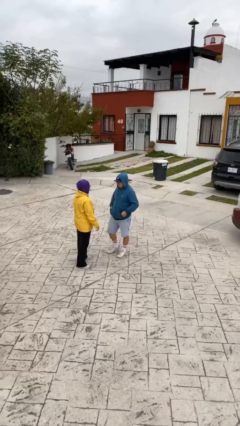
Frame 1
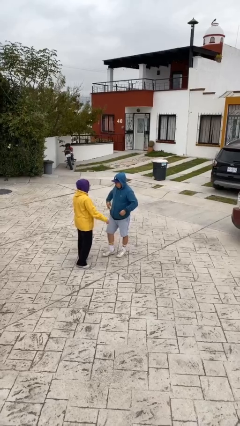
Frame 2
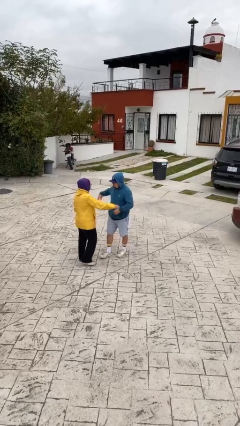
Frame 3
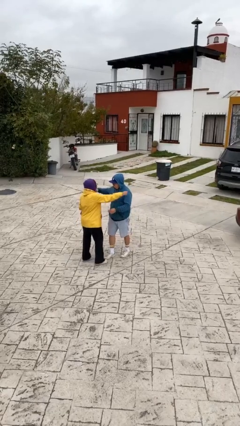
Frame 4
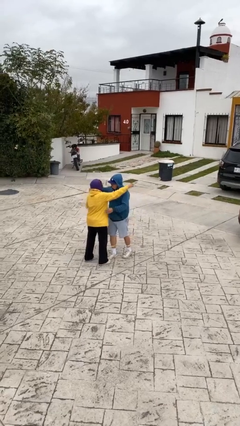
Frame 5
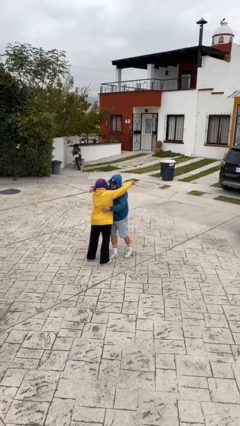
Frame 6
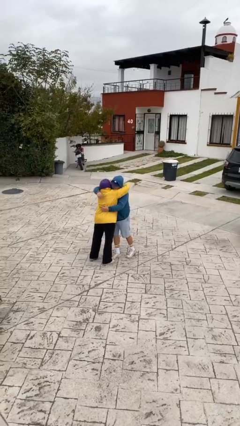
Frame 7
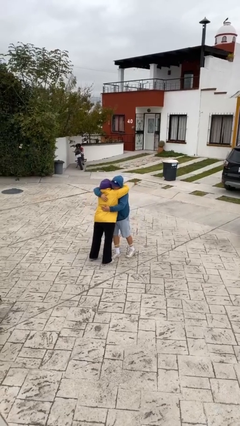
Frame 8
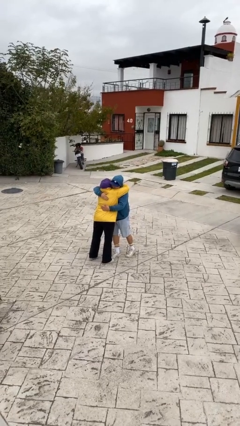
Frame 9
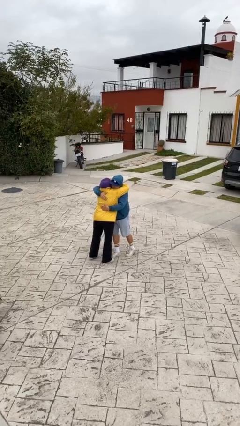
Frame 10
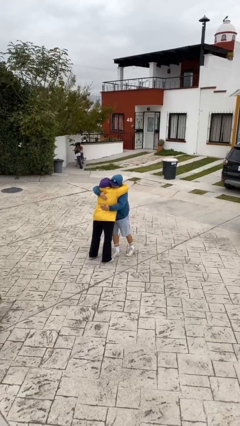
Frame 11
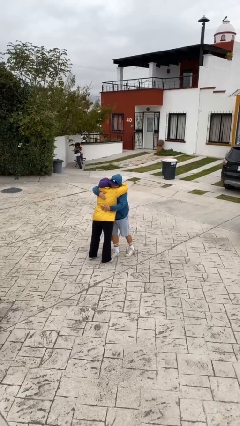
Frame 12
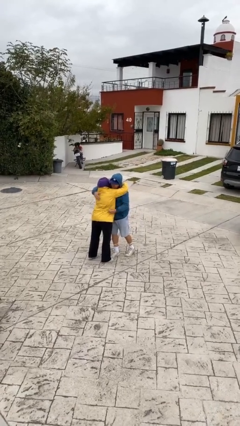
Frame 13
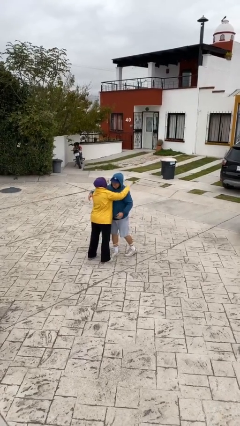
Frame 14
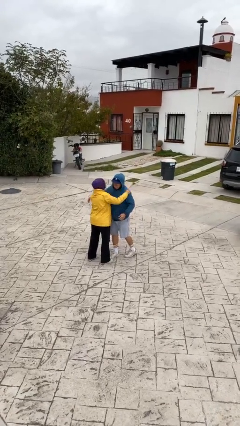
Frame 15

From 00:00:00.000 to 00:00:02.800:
person embraces person

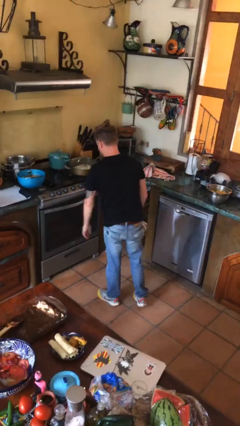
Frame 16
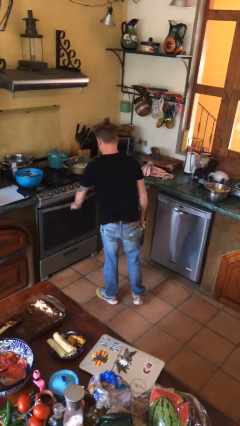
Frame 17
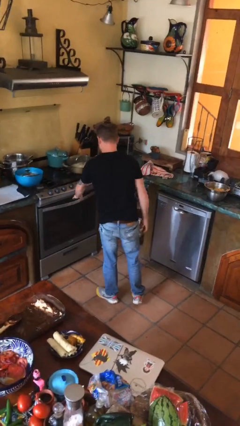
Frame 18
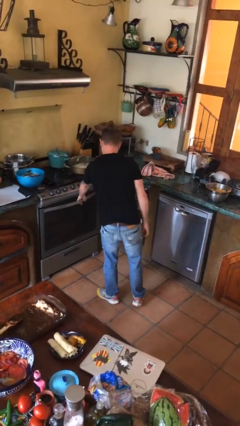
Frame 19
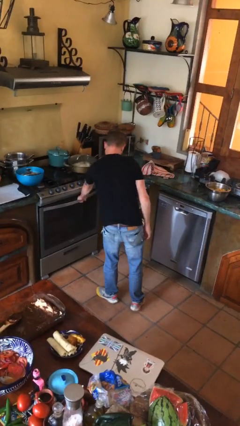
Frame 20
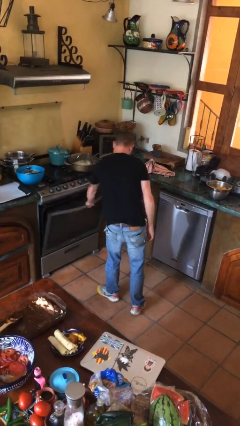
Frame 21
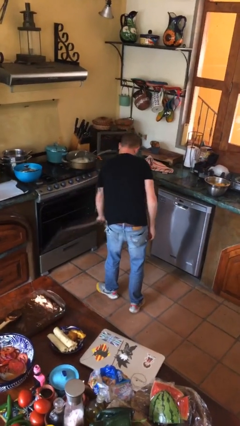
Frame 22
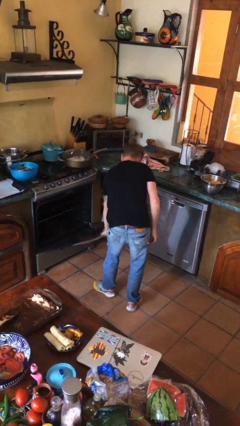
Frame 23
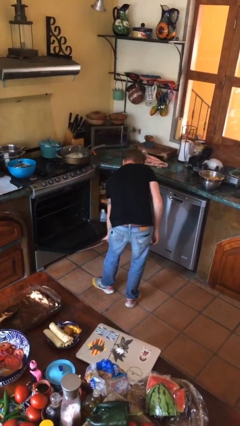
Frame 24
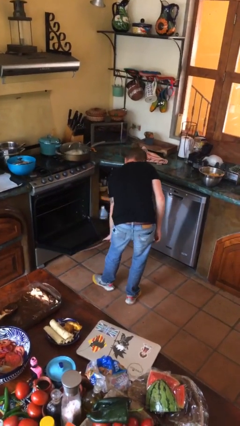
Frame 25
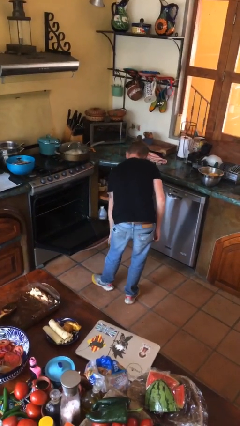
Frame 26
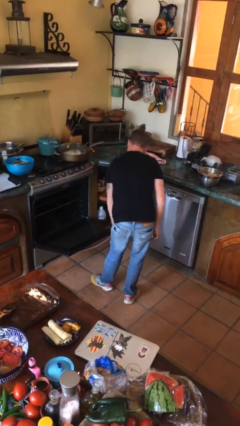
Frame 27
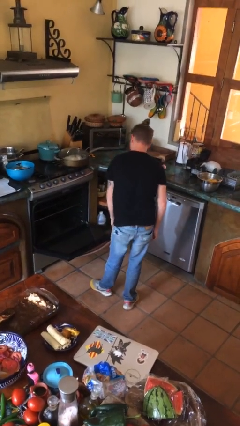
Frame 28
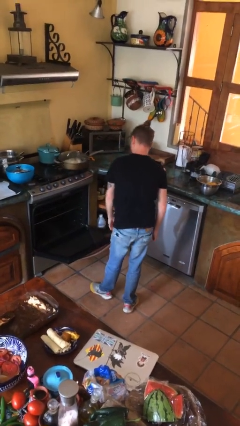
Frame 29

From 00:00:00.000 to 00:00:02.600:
person opens oven door

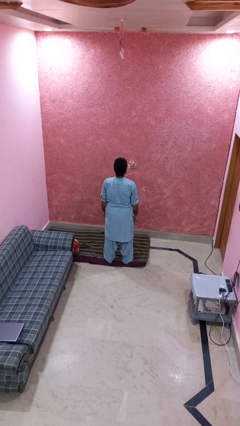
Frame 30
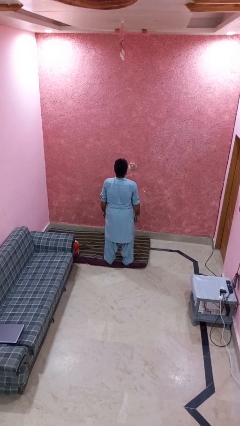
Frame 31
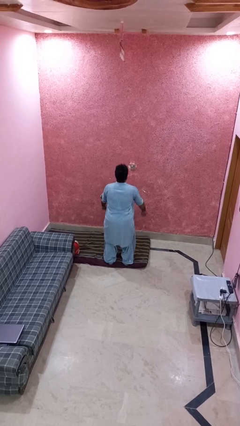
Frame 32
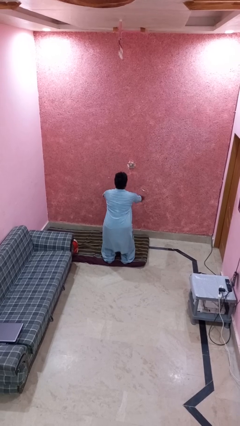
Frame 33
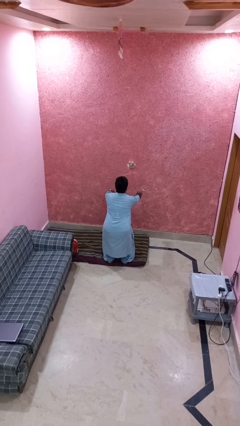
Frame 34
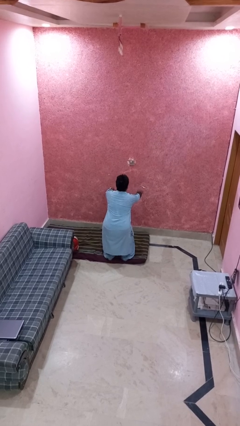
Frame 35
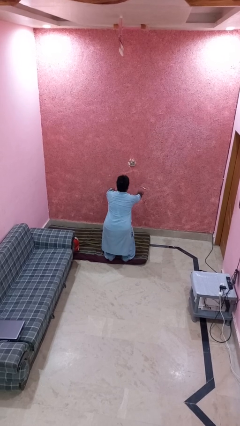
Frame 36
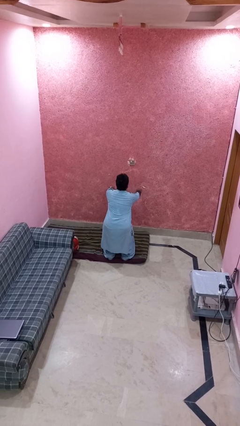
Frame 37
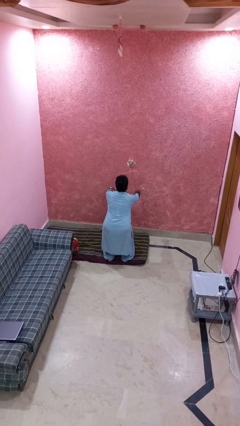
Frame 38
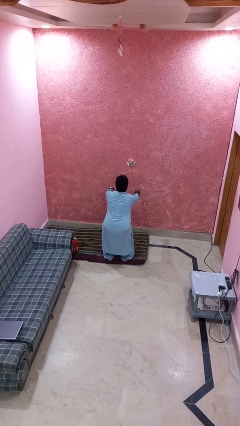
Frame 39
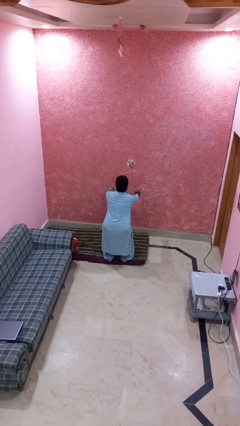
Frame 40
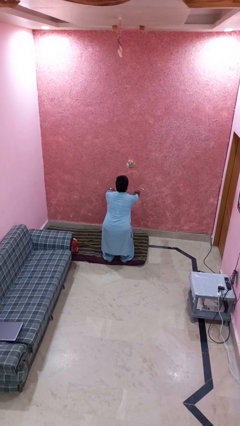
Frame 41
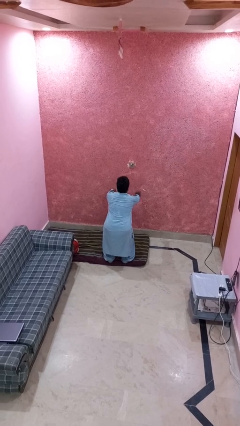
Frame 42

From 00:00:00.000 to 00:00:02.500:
person squats

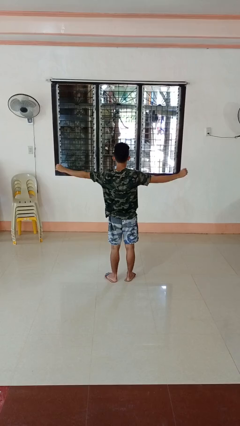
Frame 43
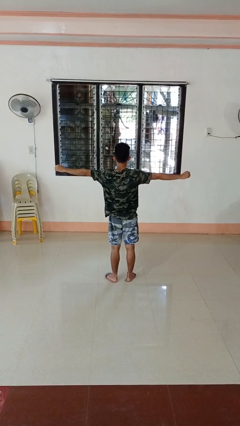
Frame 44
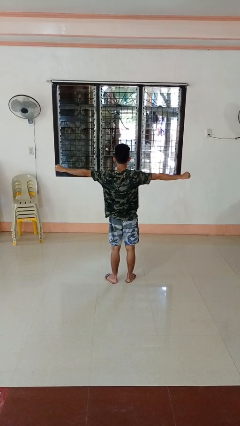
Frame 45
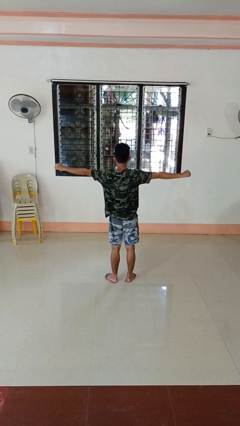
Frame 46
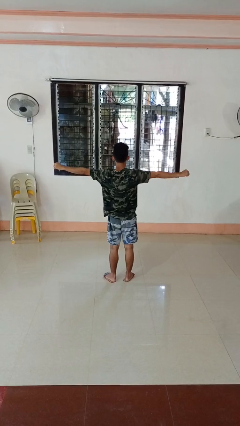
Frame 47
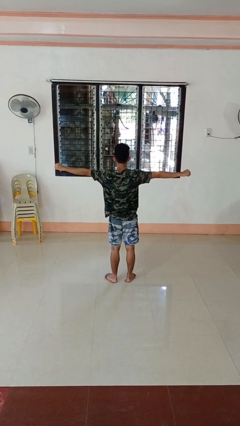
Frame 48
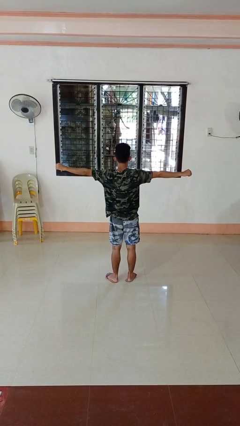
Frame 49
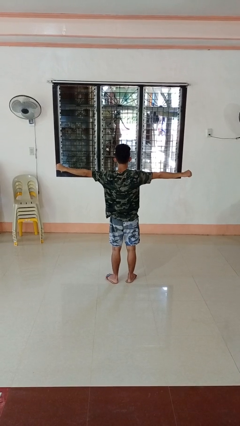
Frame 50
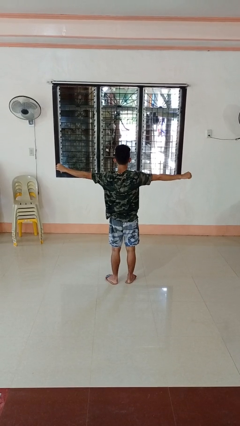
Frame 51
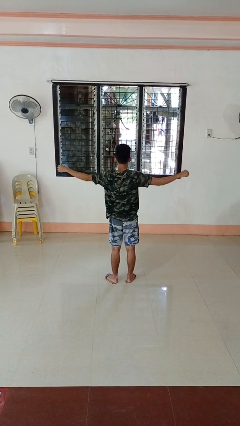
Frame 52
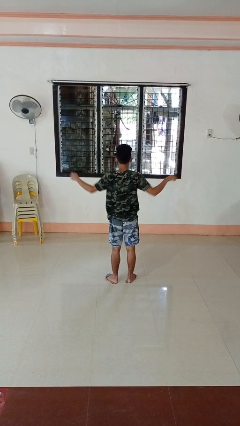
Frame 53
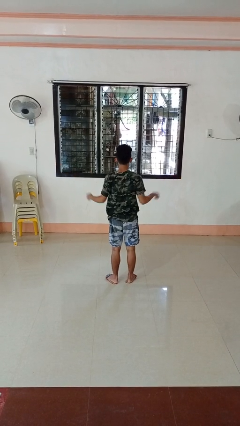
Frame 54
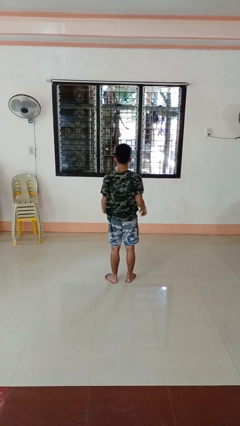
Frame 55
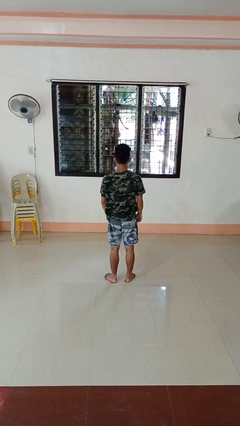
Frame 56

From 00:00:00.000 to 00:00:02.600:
person stretches arms to side

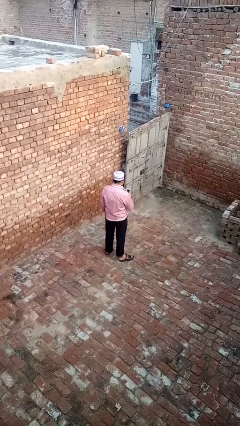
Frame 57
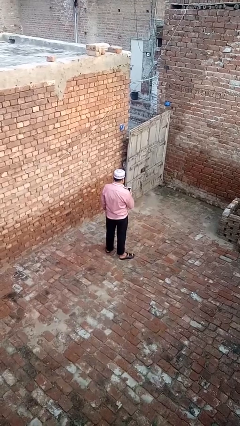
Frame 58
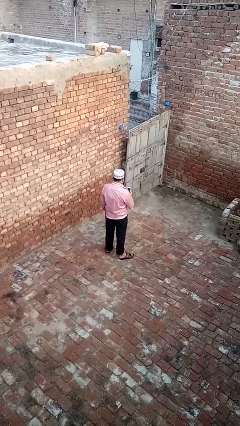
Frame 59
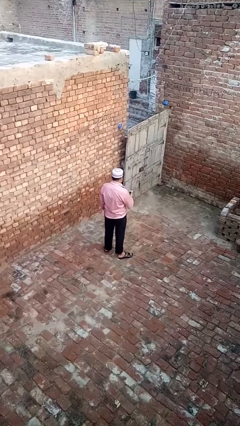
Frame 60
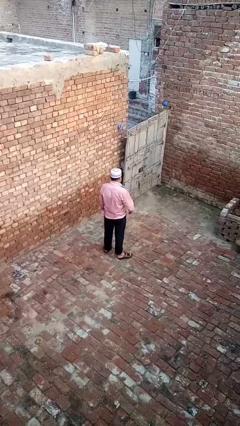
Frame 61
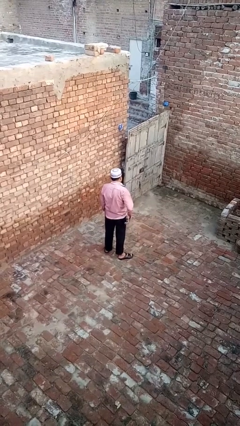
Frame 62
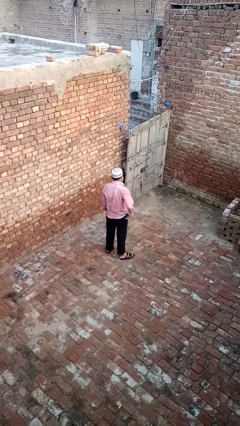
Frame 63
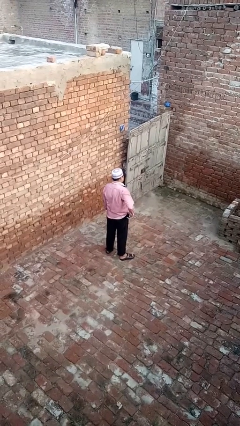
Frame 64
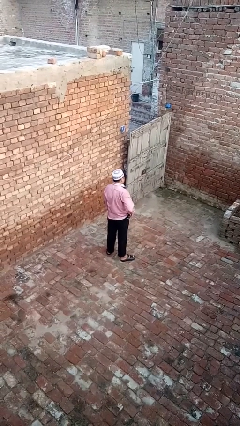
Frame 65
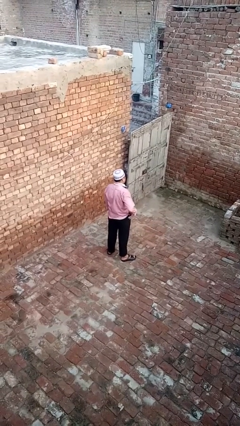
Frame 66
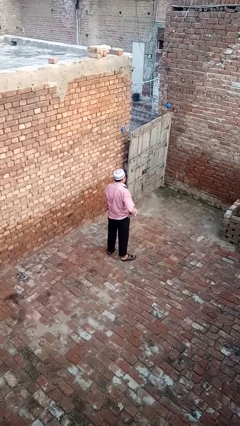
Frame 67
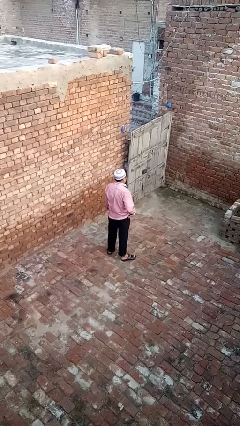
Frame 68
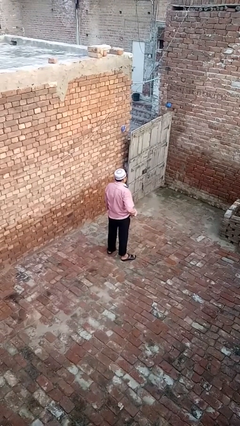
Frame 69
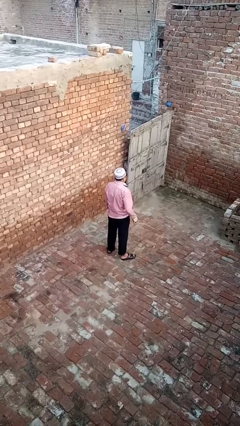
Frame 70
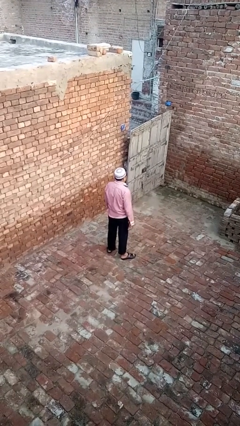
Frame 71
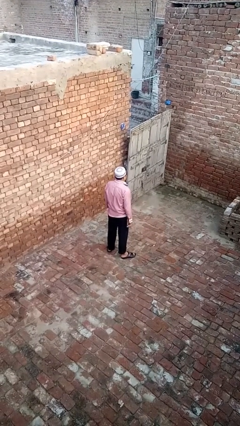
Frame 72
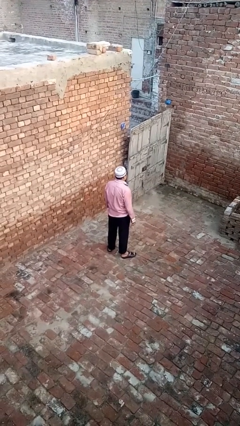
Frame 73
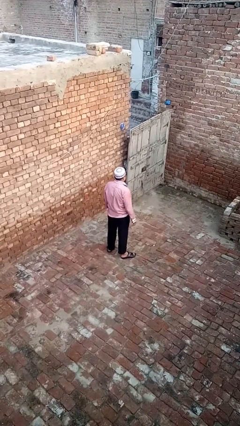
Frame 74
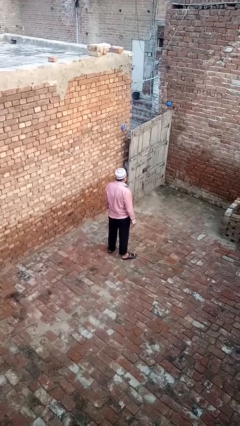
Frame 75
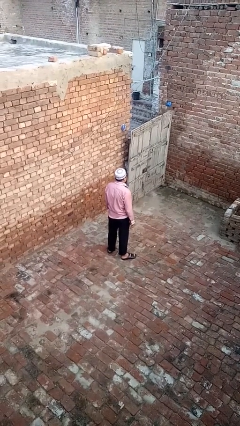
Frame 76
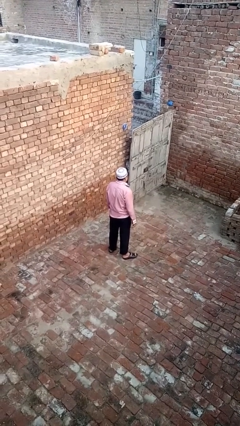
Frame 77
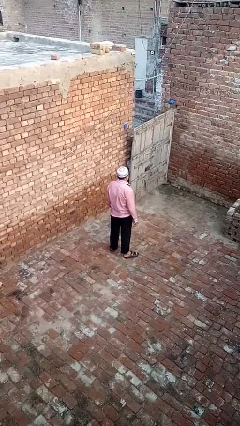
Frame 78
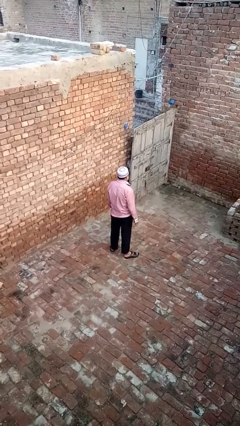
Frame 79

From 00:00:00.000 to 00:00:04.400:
person puts phone into pocket

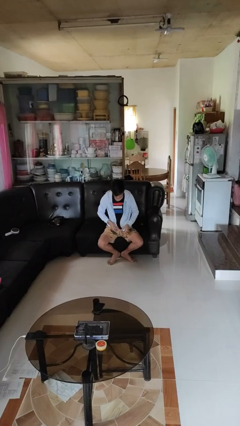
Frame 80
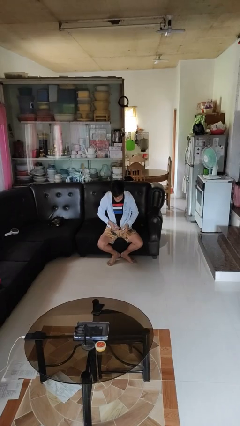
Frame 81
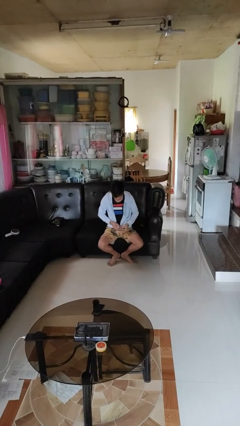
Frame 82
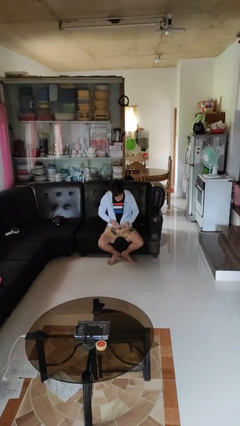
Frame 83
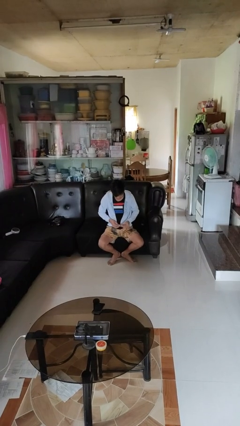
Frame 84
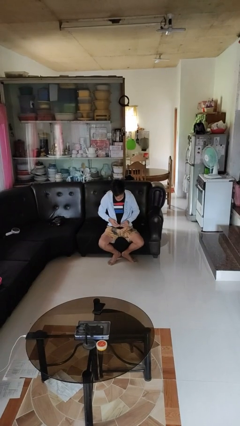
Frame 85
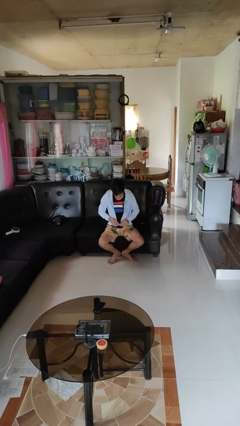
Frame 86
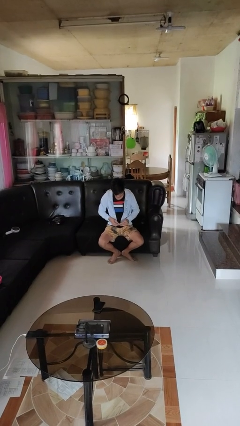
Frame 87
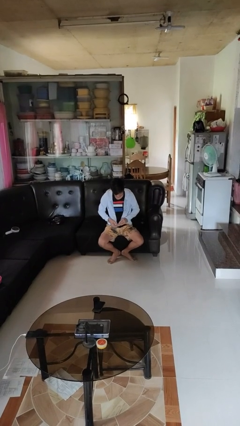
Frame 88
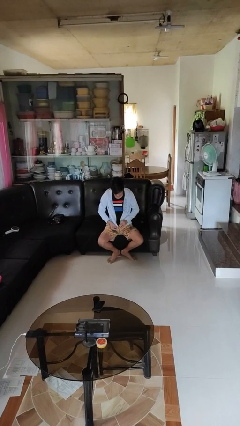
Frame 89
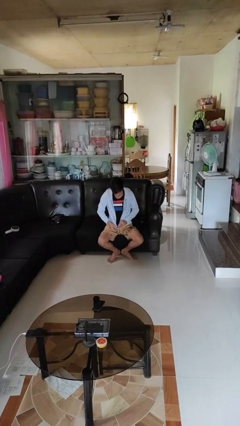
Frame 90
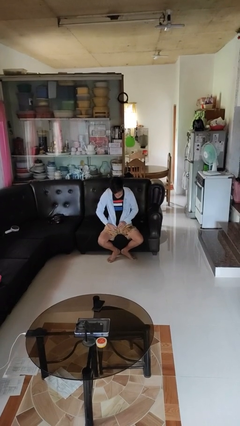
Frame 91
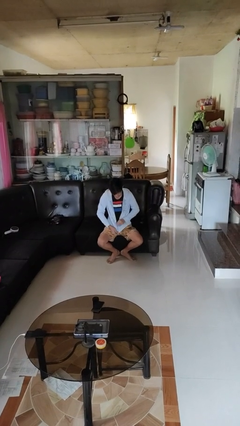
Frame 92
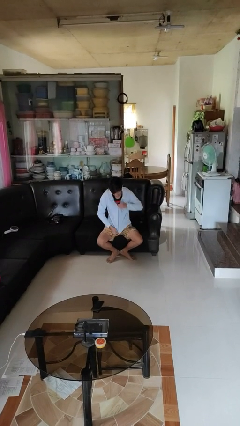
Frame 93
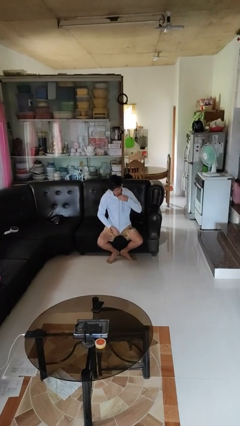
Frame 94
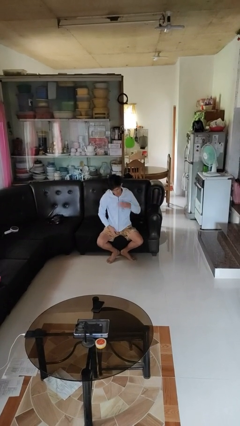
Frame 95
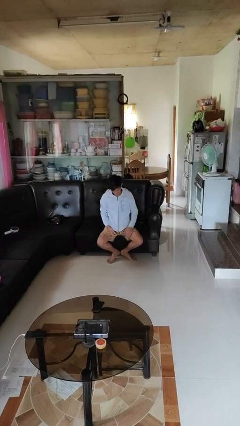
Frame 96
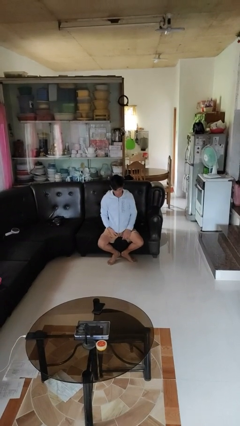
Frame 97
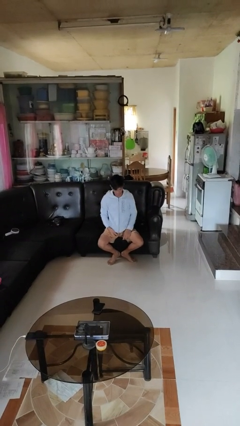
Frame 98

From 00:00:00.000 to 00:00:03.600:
person zips up jacket
